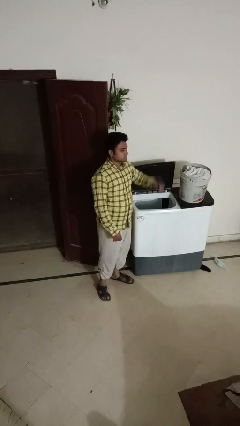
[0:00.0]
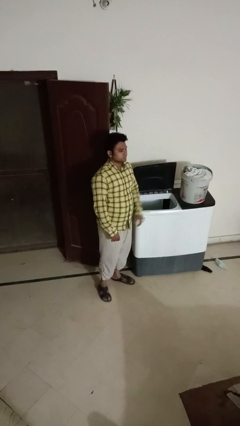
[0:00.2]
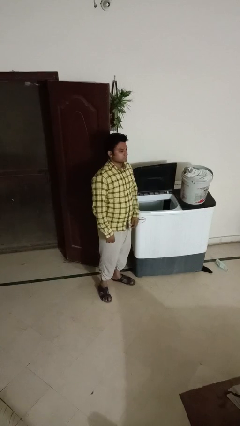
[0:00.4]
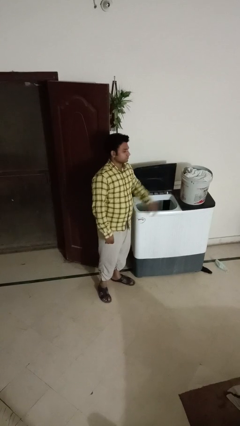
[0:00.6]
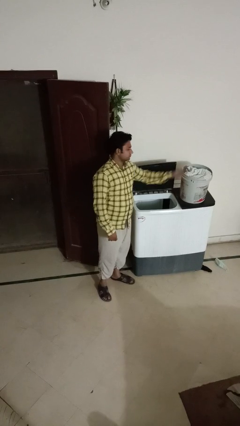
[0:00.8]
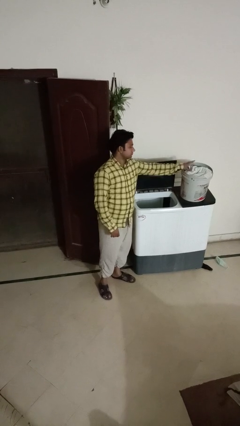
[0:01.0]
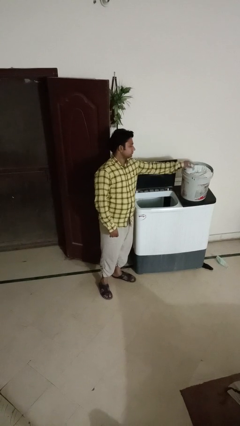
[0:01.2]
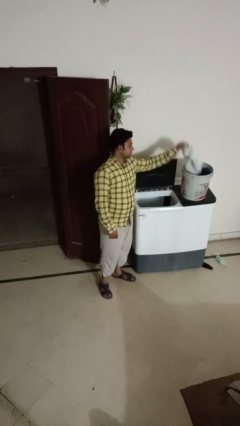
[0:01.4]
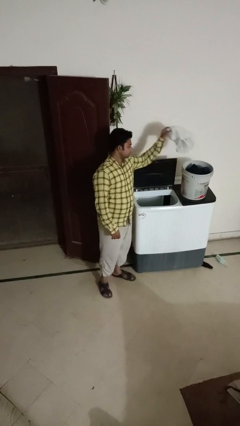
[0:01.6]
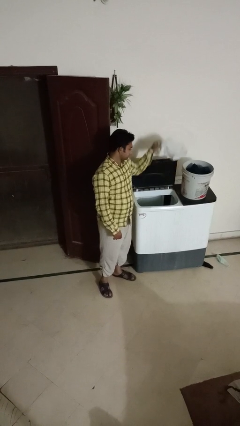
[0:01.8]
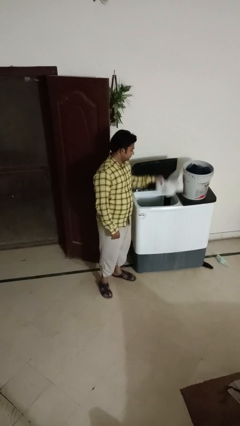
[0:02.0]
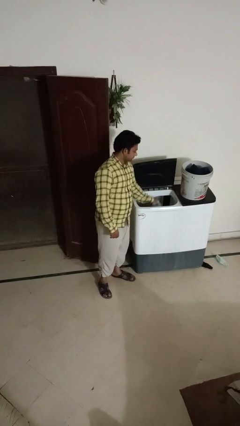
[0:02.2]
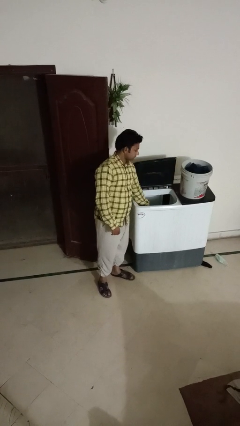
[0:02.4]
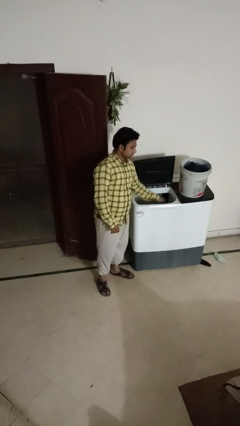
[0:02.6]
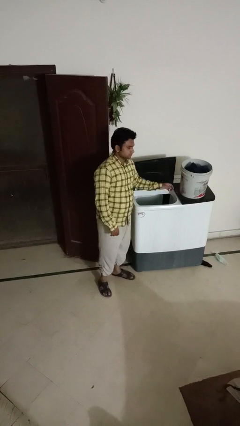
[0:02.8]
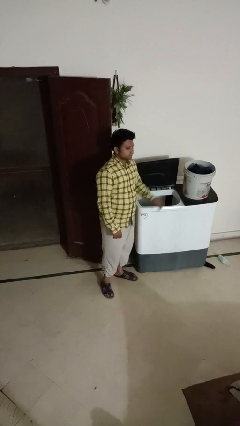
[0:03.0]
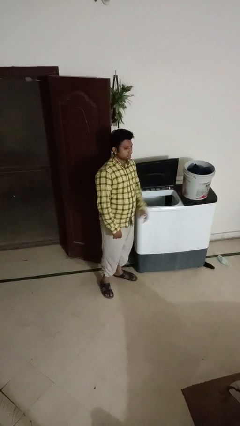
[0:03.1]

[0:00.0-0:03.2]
person loads clotheswasher

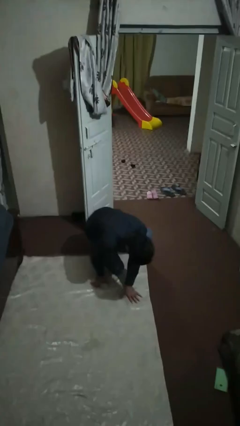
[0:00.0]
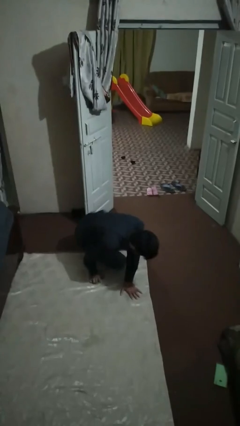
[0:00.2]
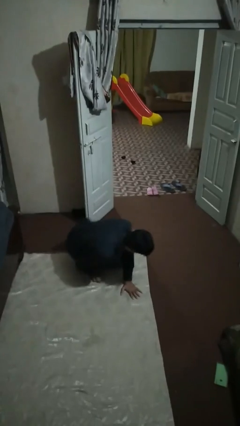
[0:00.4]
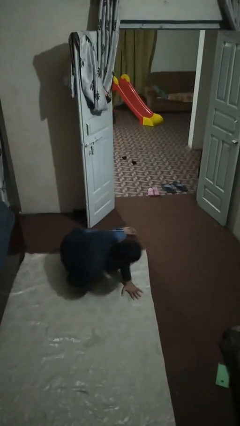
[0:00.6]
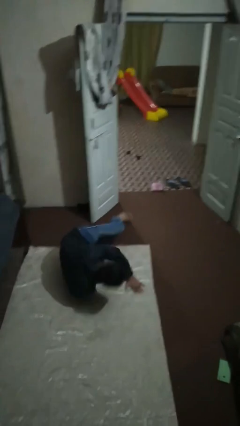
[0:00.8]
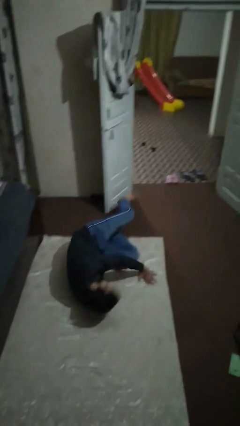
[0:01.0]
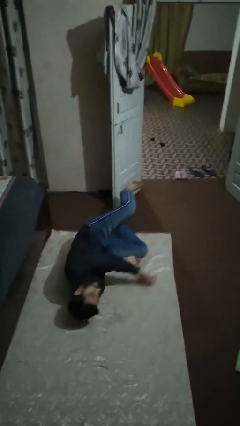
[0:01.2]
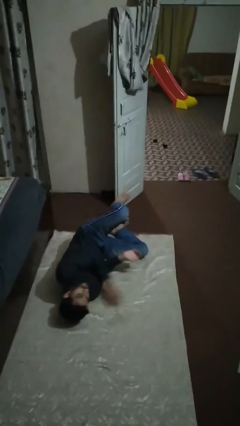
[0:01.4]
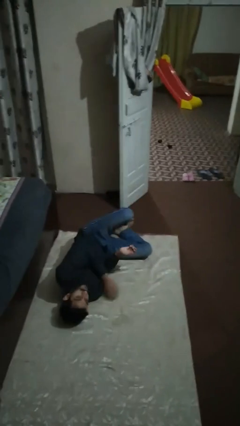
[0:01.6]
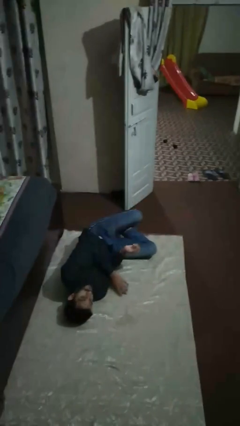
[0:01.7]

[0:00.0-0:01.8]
person lies down on floor

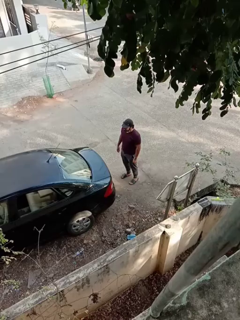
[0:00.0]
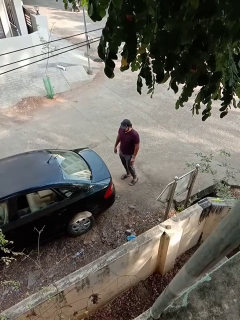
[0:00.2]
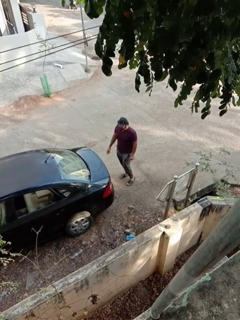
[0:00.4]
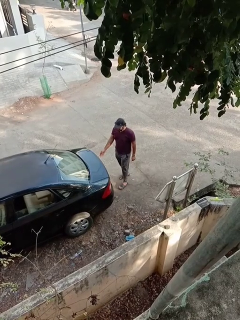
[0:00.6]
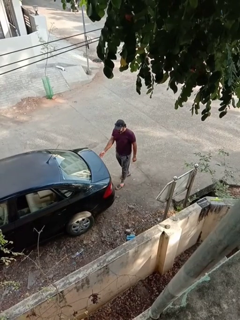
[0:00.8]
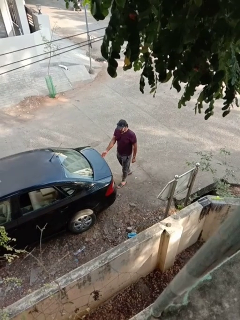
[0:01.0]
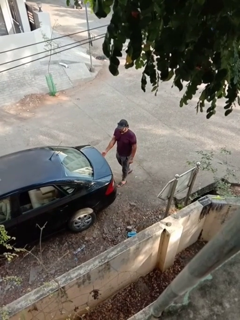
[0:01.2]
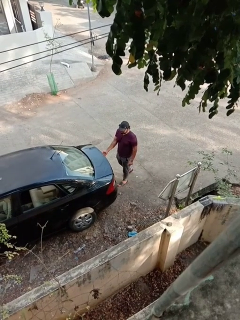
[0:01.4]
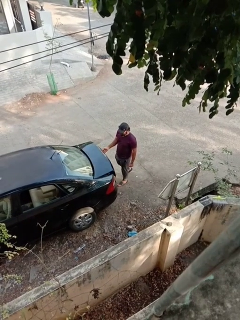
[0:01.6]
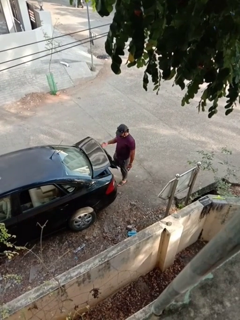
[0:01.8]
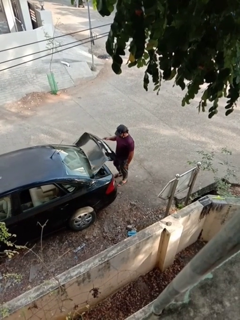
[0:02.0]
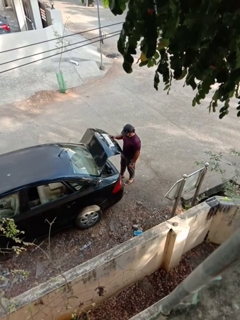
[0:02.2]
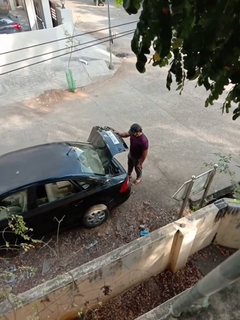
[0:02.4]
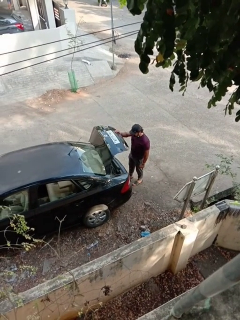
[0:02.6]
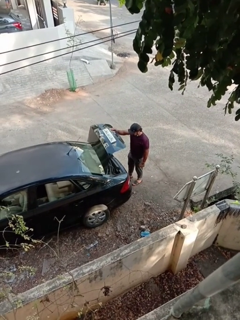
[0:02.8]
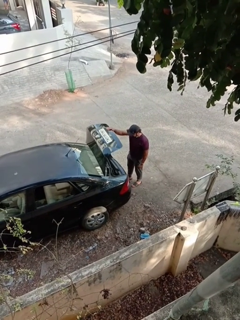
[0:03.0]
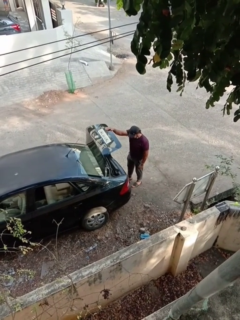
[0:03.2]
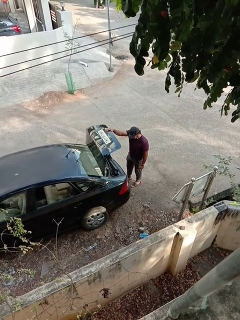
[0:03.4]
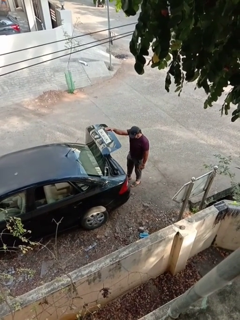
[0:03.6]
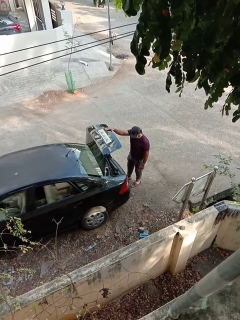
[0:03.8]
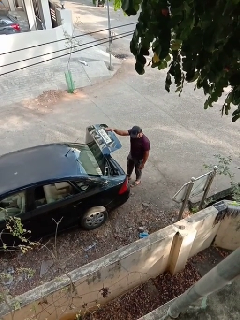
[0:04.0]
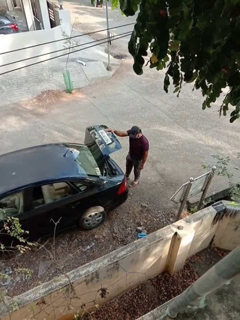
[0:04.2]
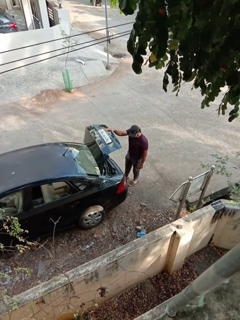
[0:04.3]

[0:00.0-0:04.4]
person opens car trunk

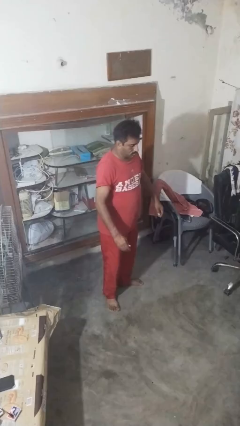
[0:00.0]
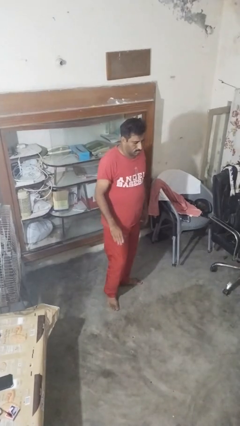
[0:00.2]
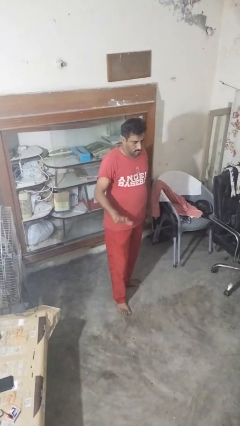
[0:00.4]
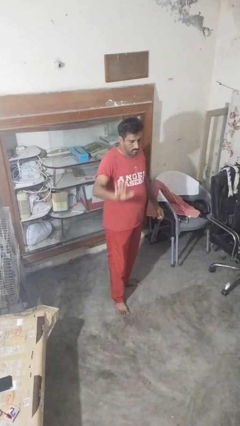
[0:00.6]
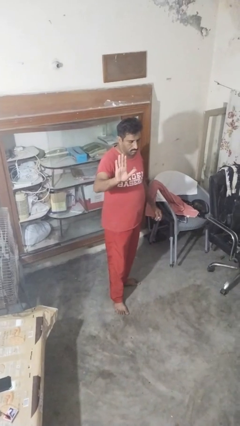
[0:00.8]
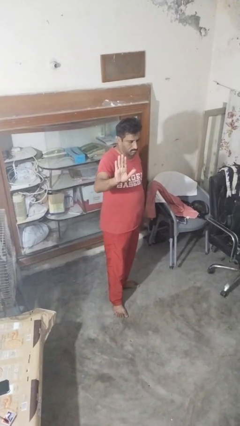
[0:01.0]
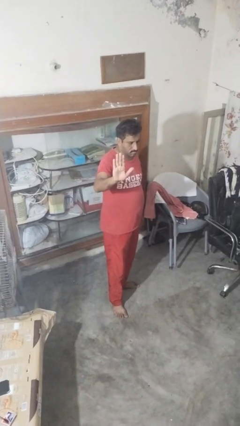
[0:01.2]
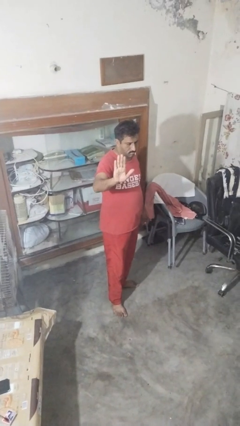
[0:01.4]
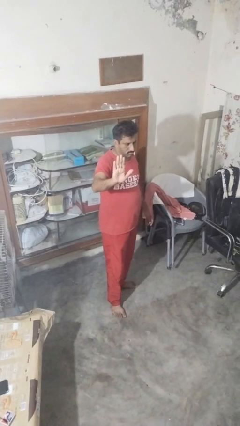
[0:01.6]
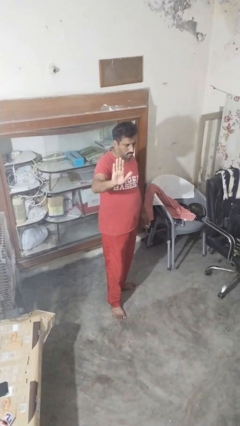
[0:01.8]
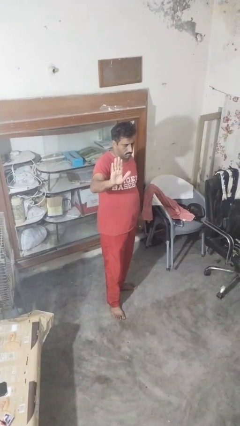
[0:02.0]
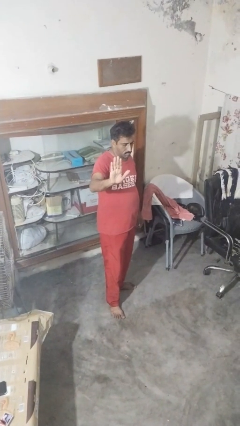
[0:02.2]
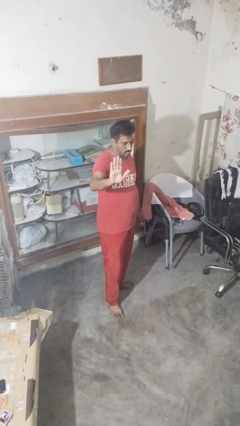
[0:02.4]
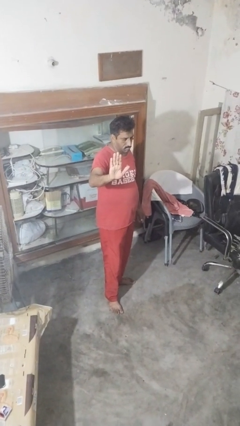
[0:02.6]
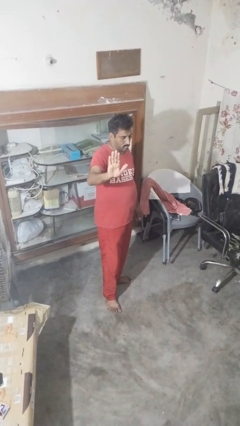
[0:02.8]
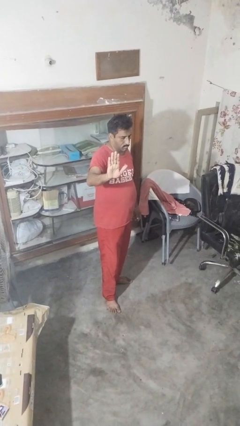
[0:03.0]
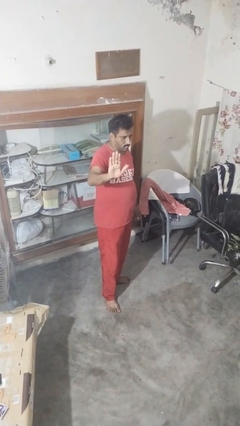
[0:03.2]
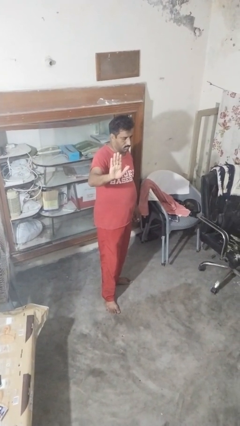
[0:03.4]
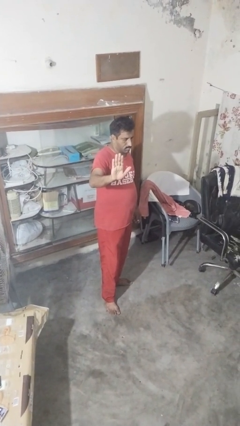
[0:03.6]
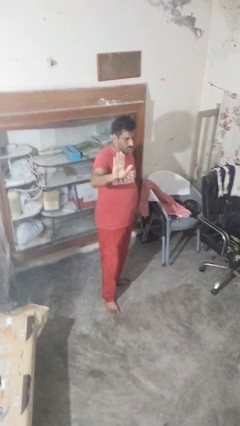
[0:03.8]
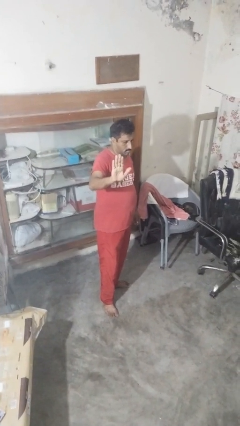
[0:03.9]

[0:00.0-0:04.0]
person gestures number five

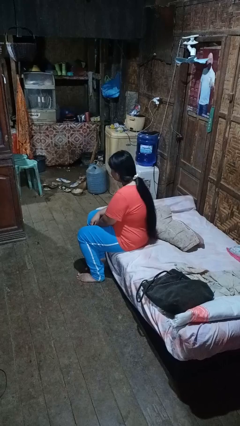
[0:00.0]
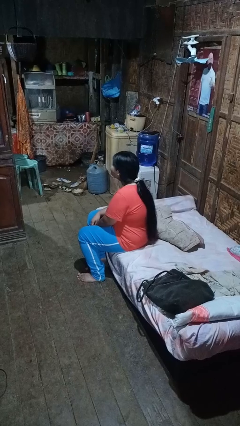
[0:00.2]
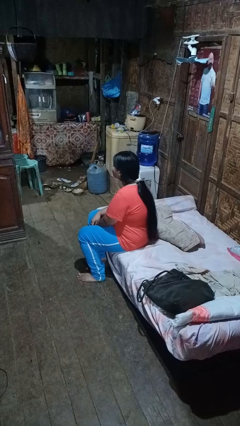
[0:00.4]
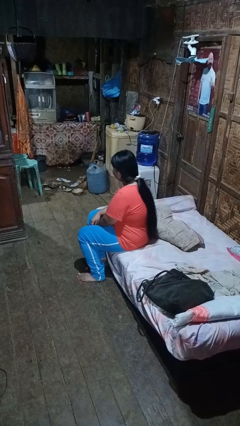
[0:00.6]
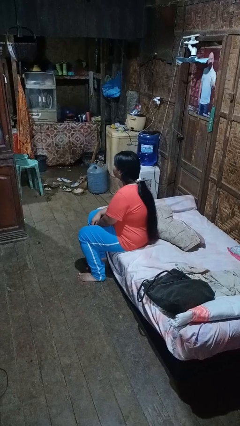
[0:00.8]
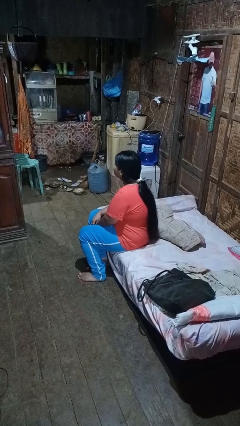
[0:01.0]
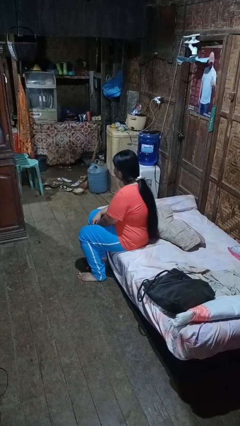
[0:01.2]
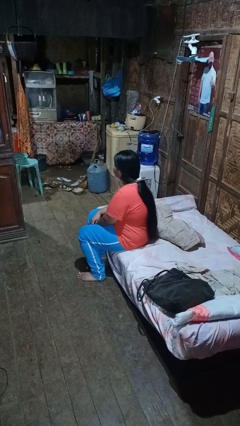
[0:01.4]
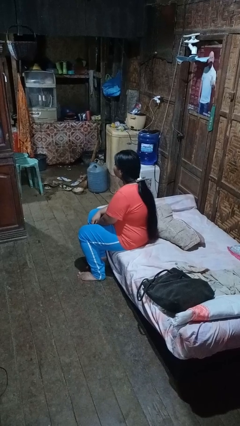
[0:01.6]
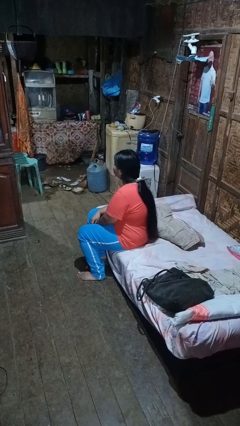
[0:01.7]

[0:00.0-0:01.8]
person nods head

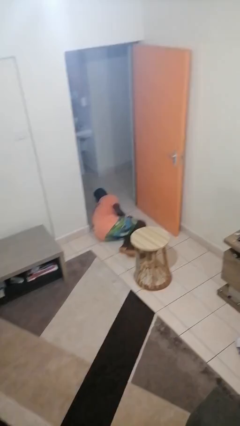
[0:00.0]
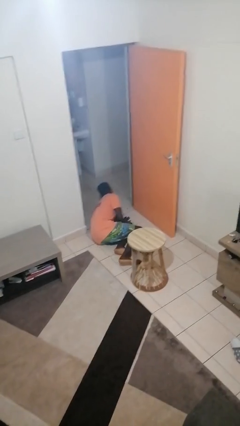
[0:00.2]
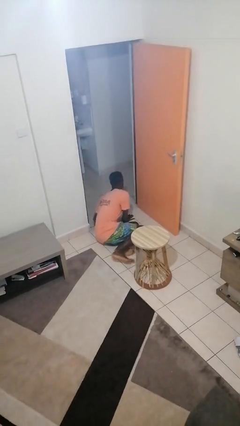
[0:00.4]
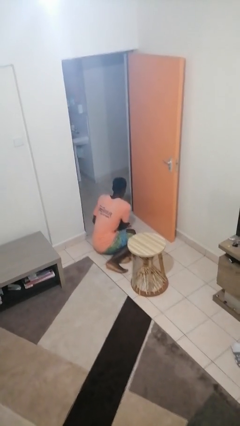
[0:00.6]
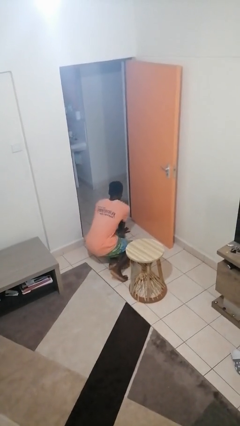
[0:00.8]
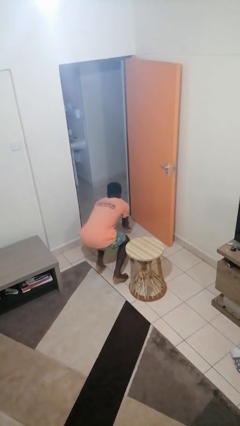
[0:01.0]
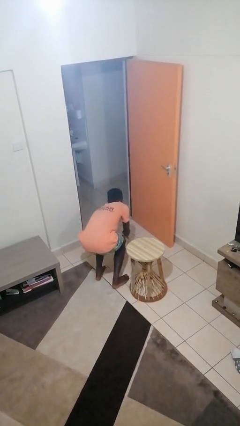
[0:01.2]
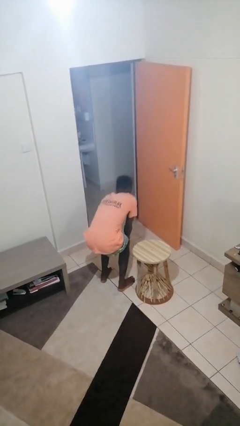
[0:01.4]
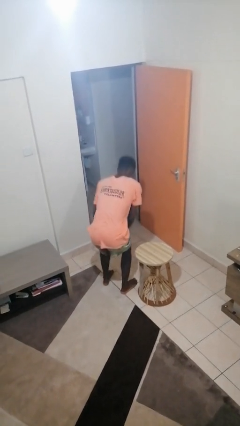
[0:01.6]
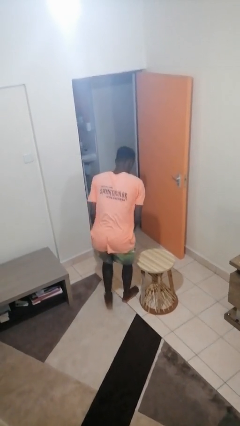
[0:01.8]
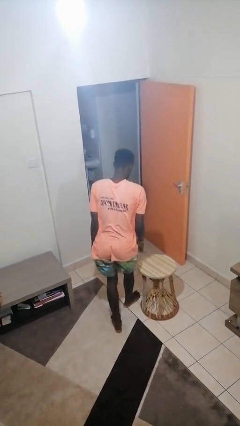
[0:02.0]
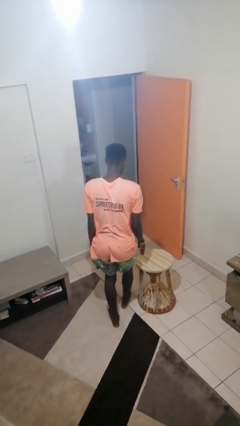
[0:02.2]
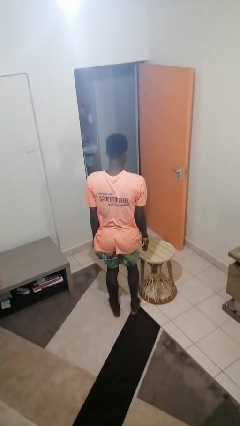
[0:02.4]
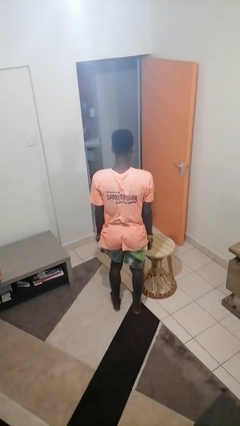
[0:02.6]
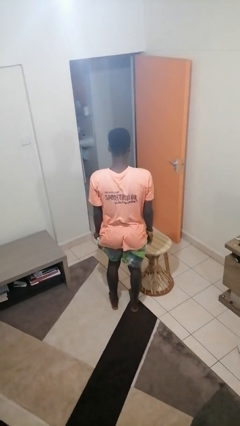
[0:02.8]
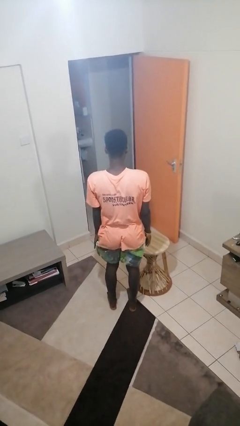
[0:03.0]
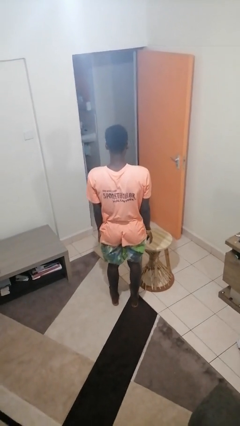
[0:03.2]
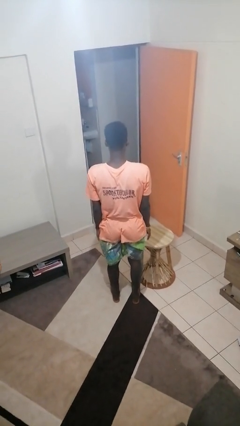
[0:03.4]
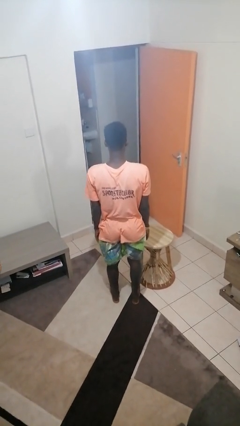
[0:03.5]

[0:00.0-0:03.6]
person stands up from floor
